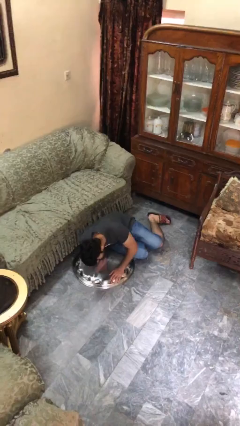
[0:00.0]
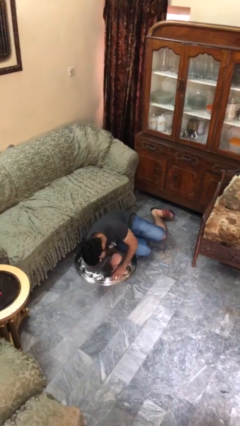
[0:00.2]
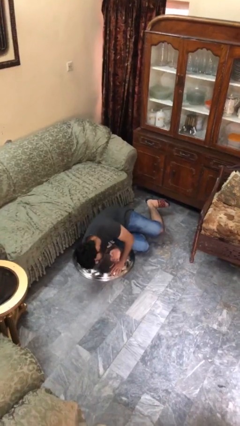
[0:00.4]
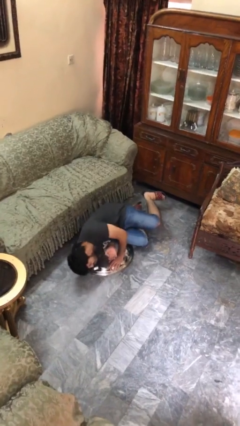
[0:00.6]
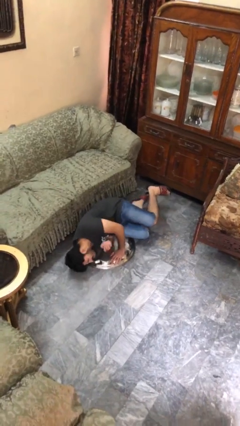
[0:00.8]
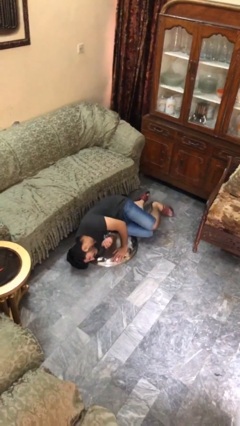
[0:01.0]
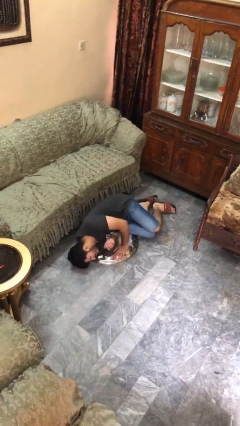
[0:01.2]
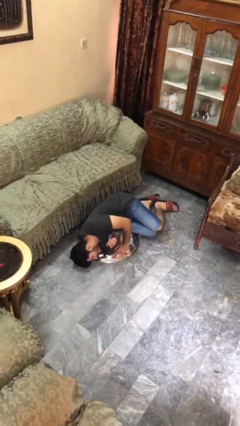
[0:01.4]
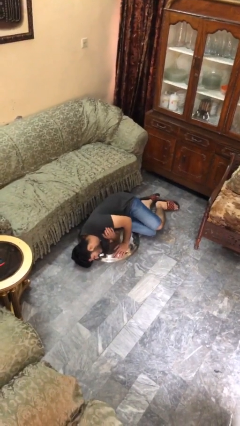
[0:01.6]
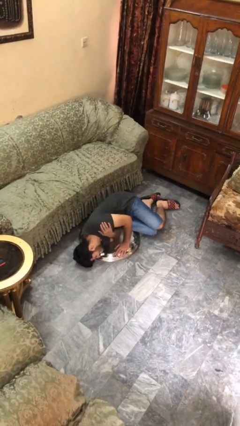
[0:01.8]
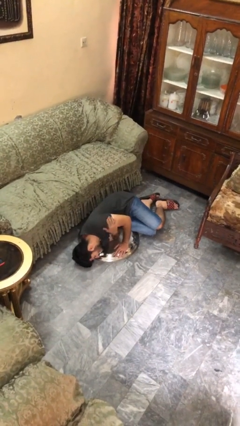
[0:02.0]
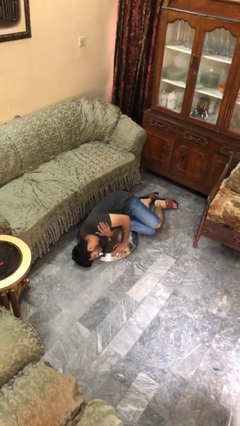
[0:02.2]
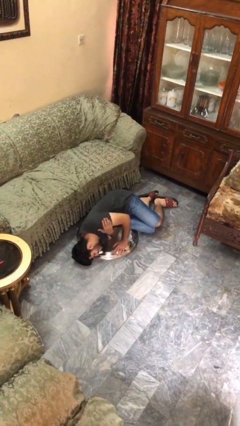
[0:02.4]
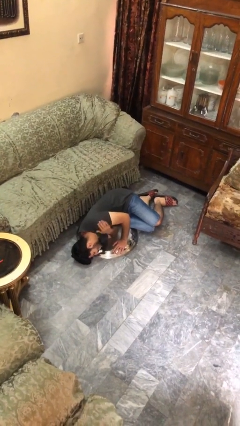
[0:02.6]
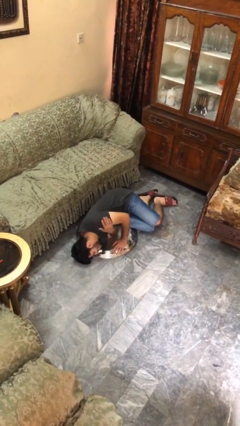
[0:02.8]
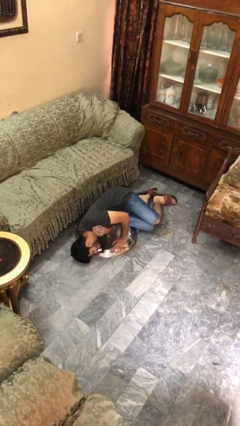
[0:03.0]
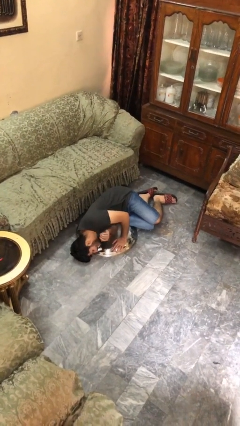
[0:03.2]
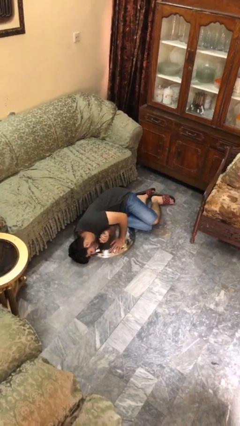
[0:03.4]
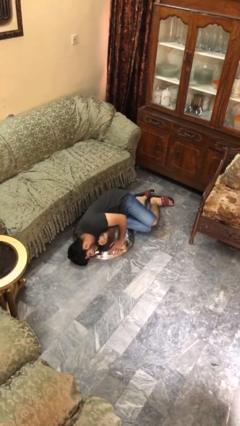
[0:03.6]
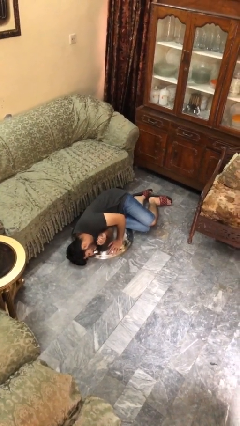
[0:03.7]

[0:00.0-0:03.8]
person lies down on floor

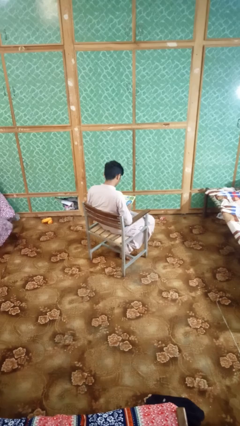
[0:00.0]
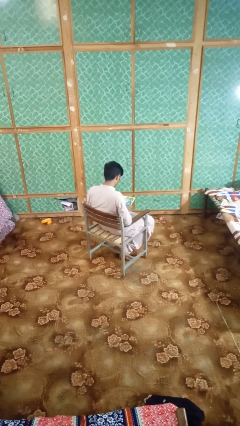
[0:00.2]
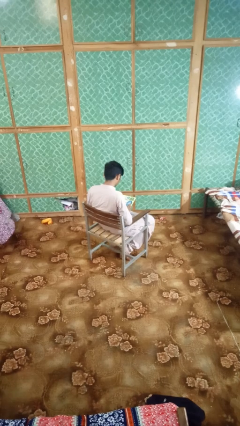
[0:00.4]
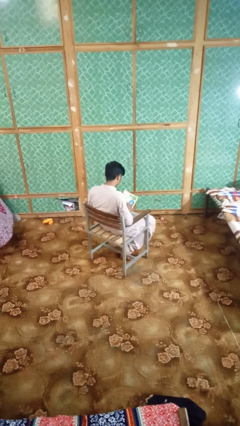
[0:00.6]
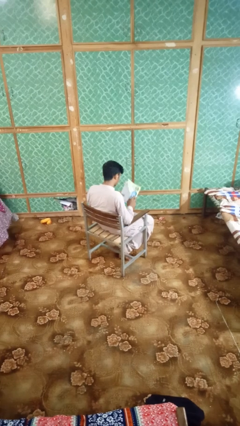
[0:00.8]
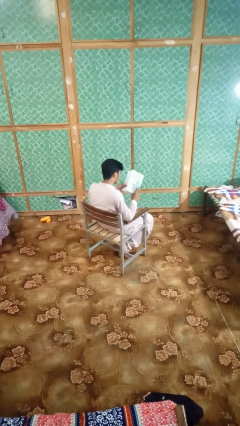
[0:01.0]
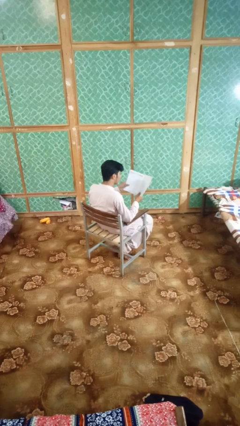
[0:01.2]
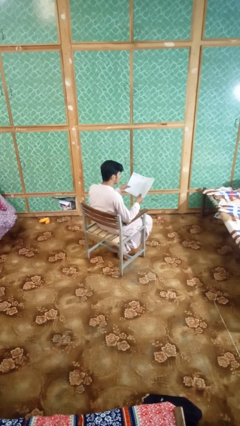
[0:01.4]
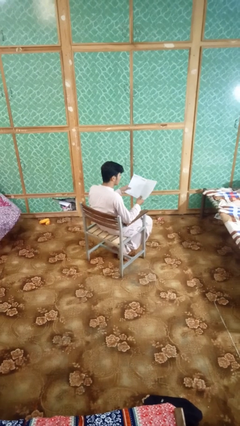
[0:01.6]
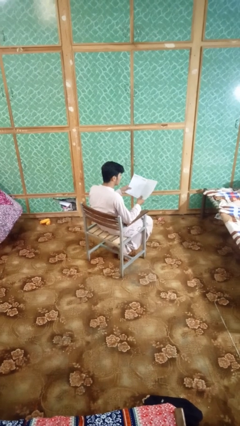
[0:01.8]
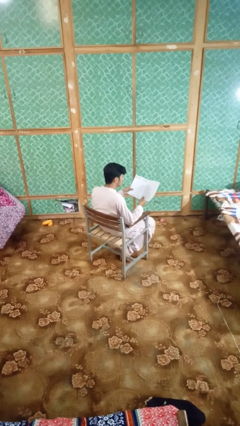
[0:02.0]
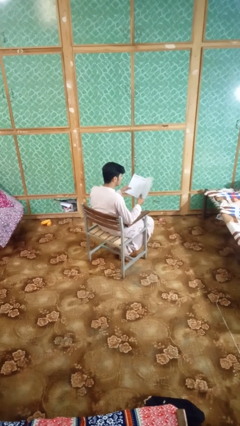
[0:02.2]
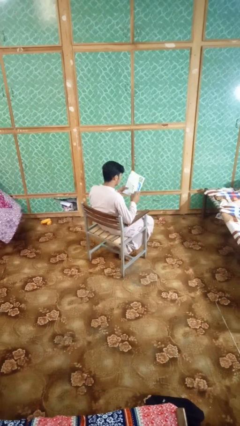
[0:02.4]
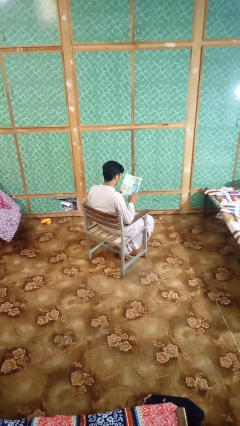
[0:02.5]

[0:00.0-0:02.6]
person reads magazine

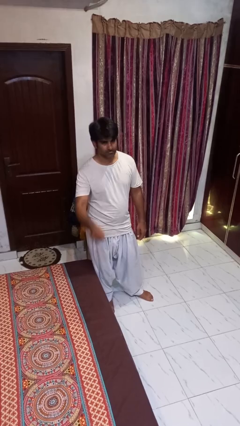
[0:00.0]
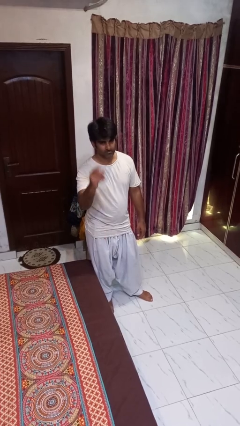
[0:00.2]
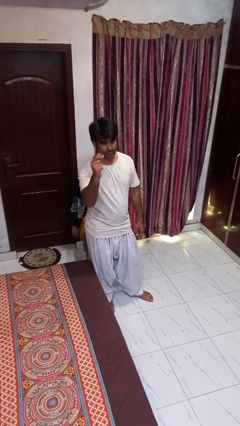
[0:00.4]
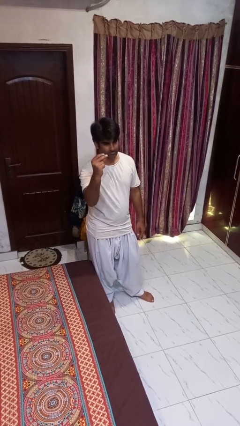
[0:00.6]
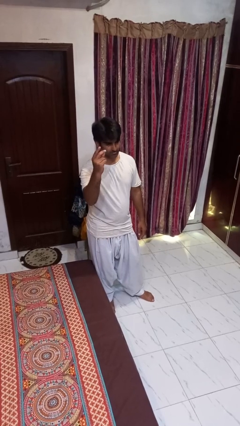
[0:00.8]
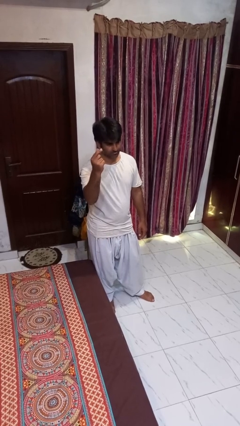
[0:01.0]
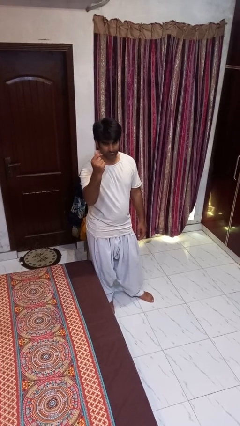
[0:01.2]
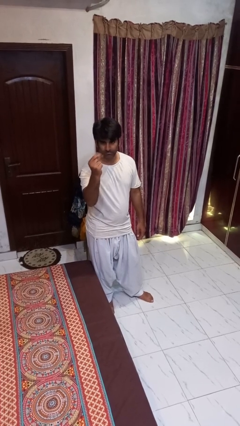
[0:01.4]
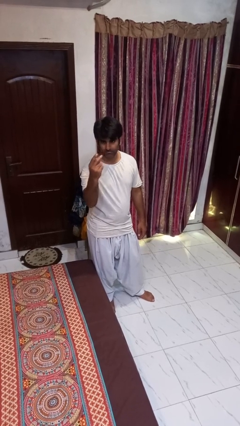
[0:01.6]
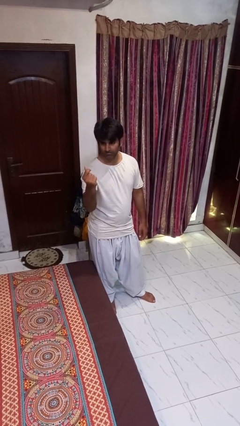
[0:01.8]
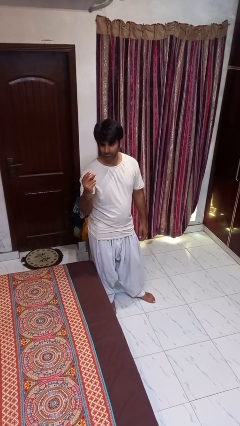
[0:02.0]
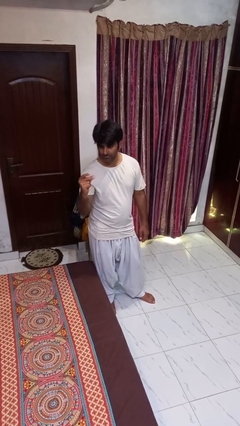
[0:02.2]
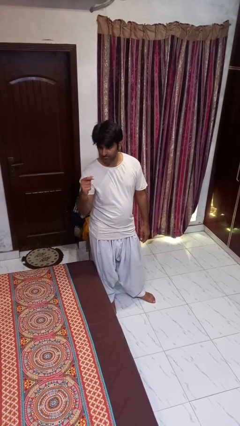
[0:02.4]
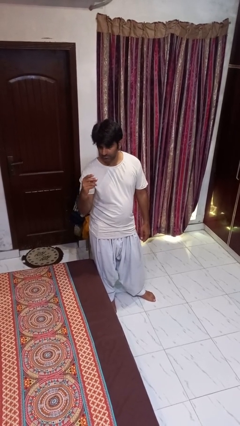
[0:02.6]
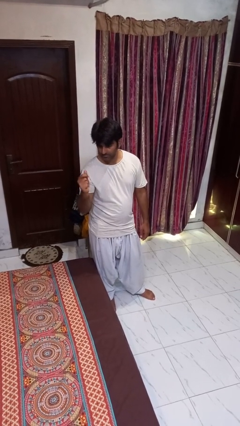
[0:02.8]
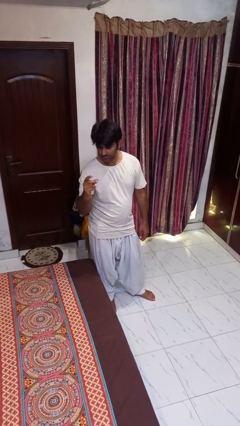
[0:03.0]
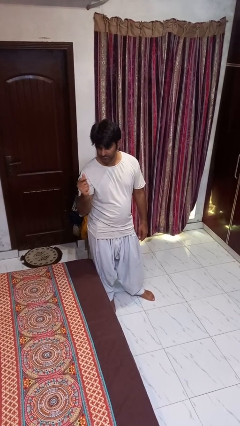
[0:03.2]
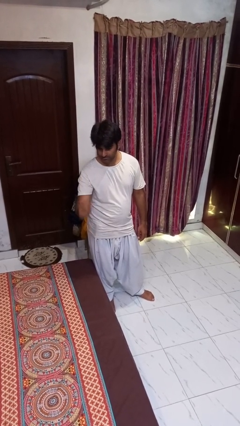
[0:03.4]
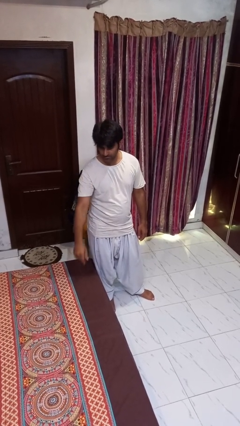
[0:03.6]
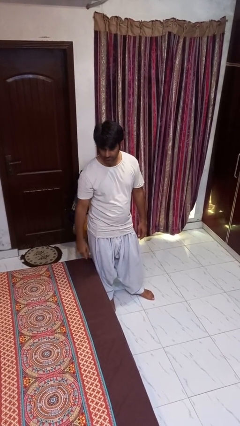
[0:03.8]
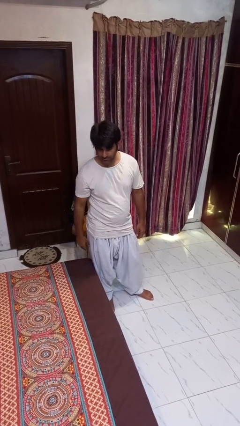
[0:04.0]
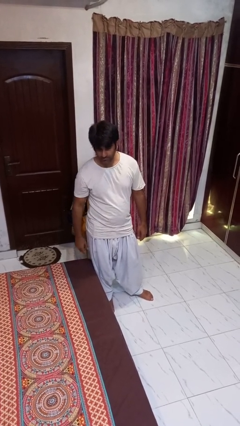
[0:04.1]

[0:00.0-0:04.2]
person snaps fingers

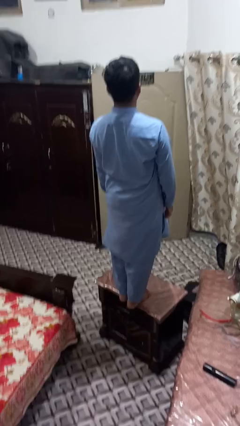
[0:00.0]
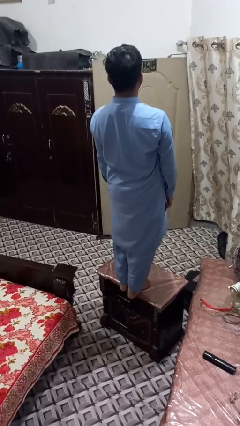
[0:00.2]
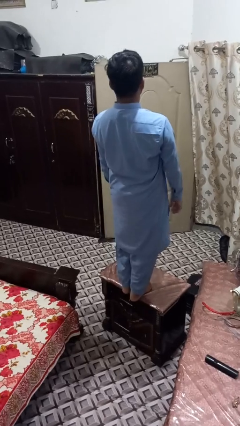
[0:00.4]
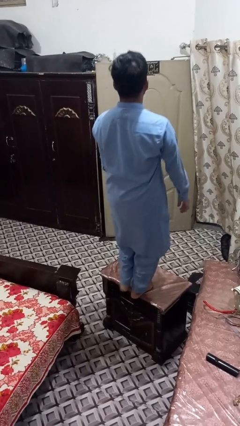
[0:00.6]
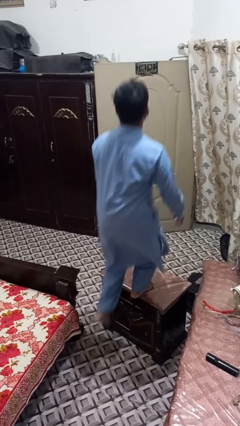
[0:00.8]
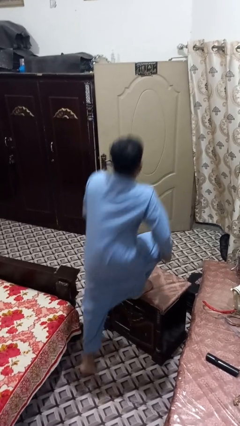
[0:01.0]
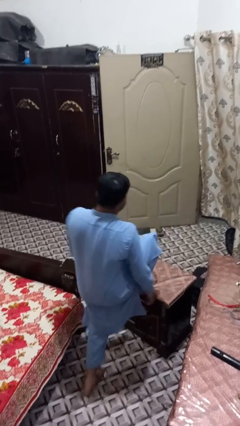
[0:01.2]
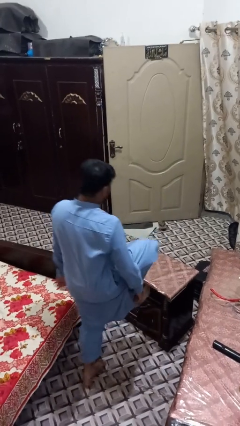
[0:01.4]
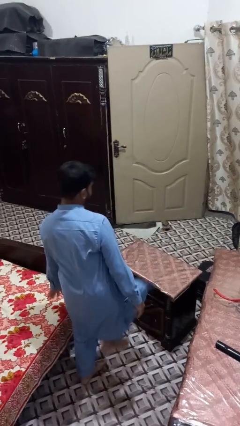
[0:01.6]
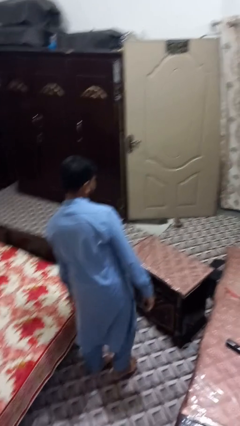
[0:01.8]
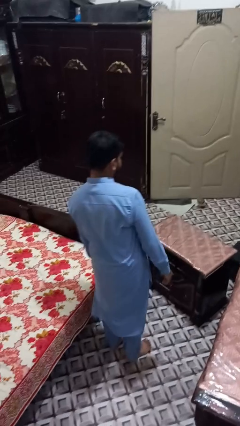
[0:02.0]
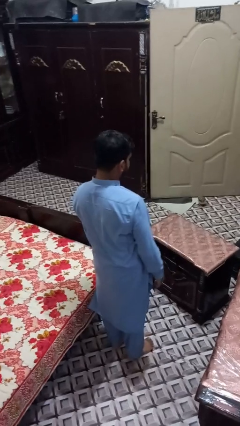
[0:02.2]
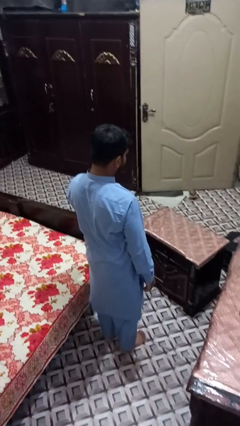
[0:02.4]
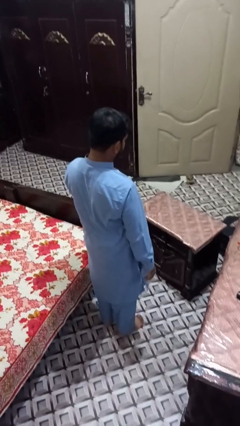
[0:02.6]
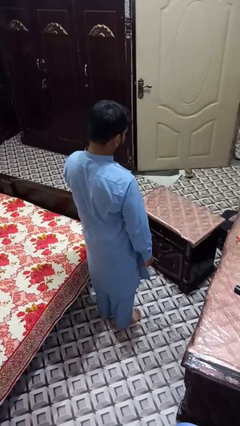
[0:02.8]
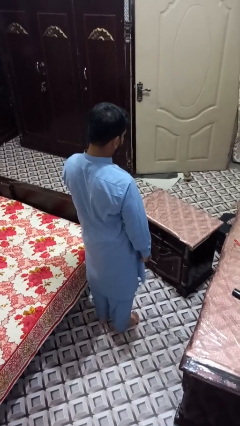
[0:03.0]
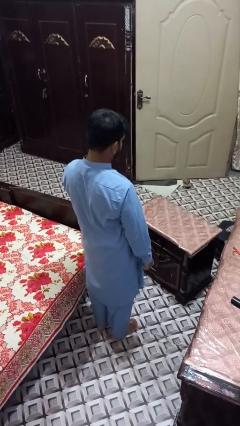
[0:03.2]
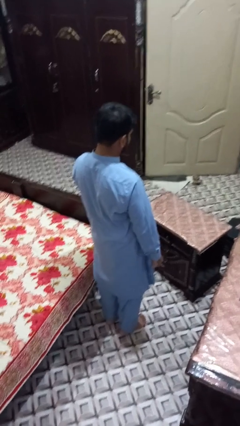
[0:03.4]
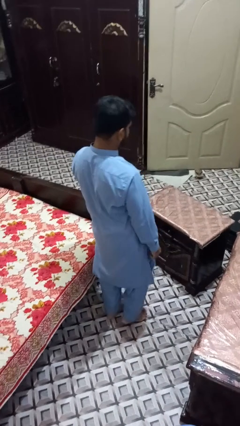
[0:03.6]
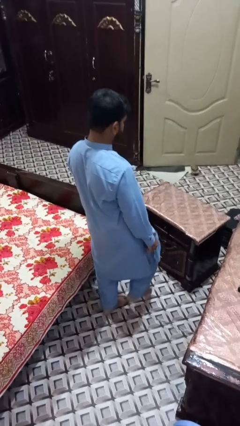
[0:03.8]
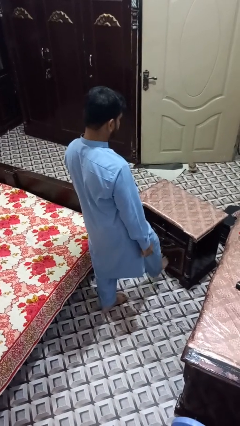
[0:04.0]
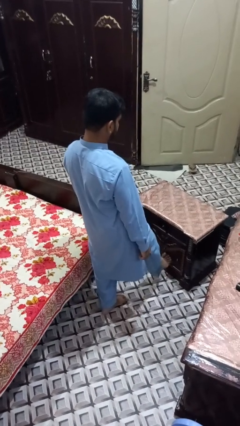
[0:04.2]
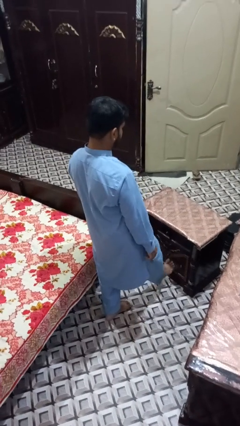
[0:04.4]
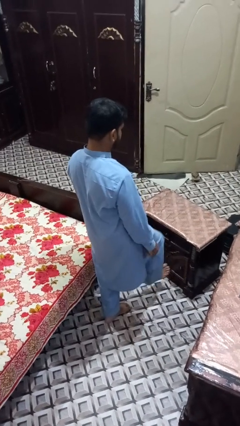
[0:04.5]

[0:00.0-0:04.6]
person climbs off table

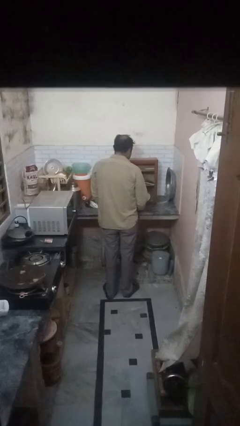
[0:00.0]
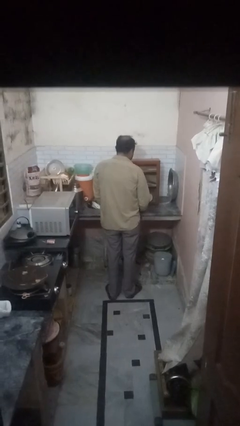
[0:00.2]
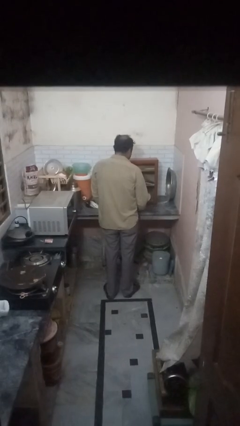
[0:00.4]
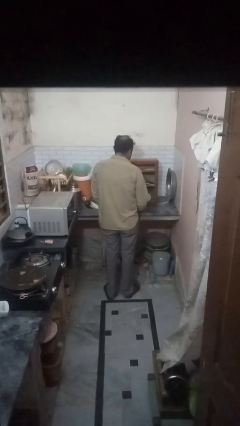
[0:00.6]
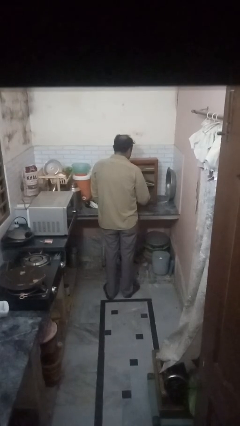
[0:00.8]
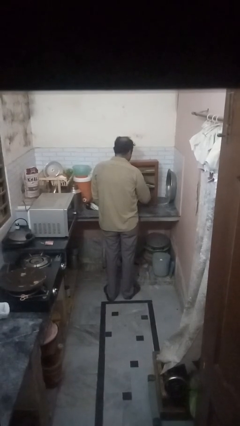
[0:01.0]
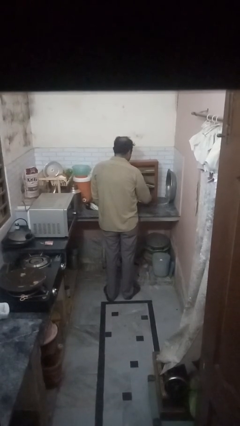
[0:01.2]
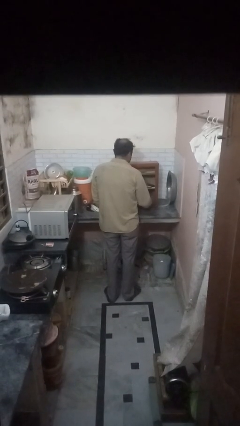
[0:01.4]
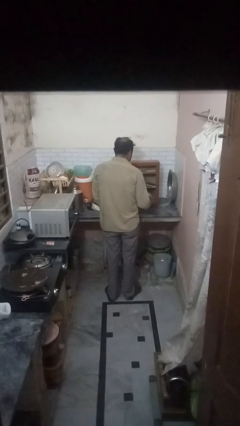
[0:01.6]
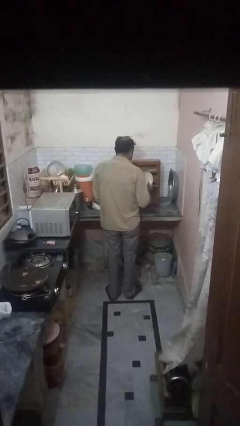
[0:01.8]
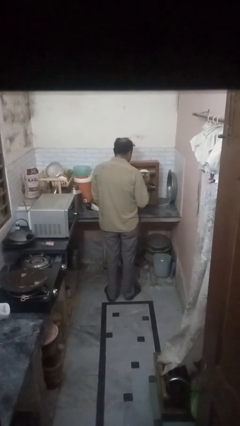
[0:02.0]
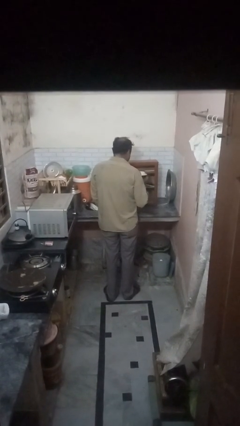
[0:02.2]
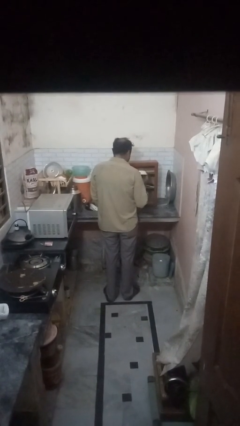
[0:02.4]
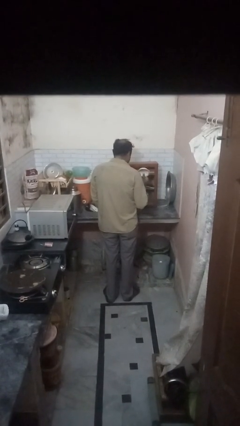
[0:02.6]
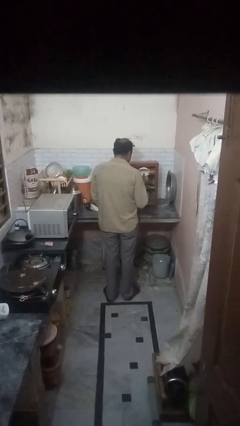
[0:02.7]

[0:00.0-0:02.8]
person puts object in cabinet
